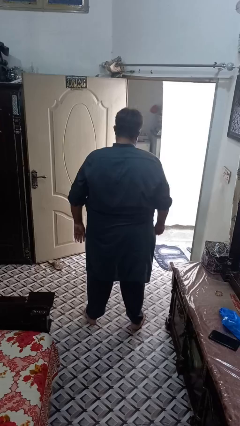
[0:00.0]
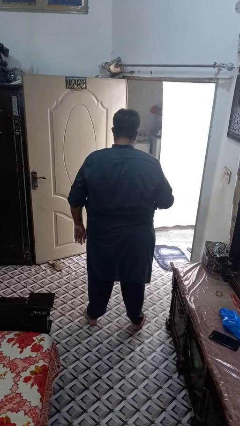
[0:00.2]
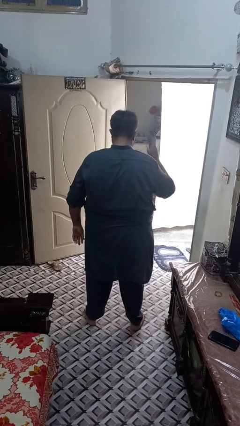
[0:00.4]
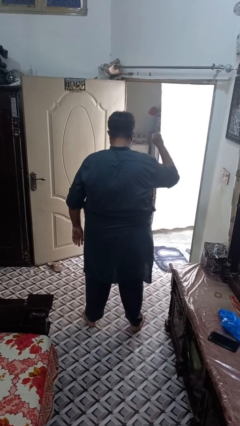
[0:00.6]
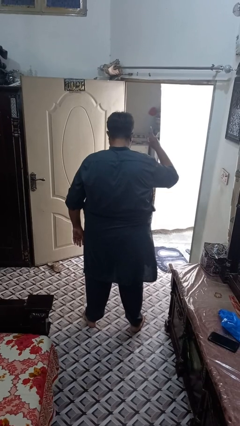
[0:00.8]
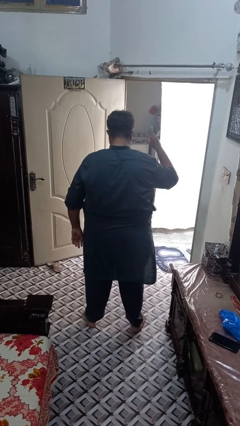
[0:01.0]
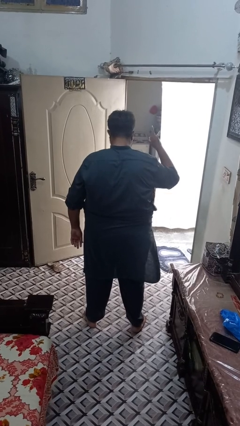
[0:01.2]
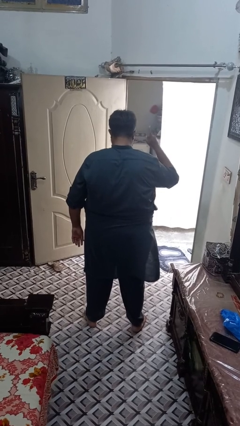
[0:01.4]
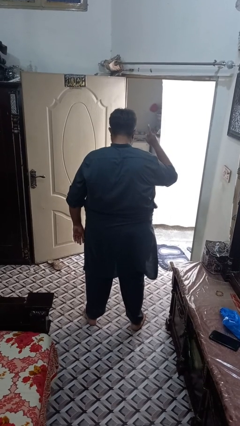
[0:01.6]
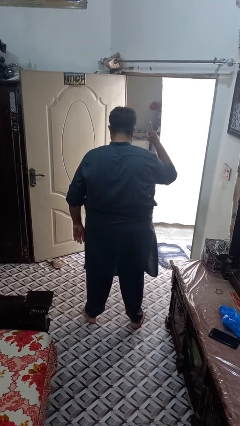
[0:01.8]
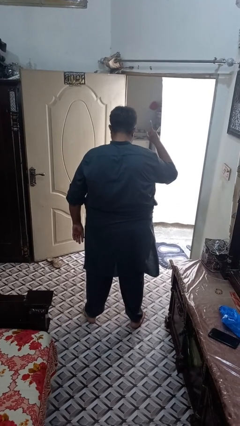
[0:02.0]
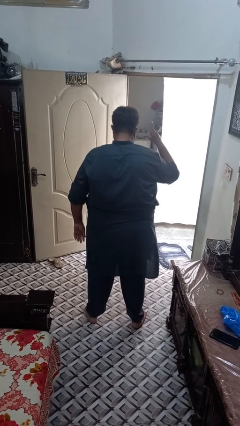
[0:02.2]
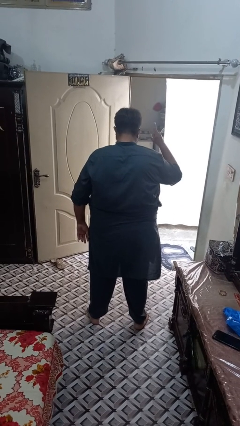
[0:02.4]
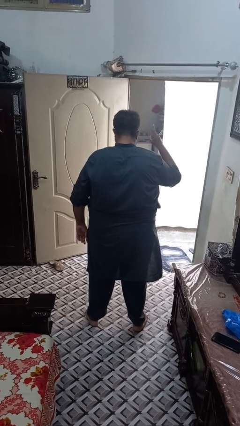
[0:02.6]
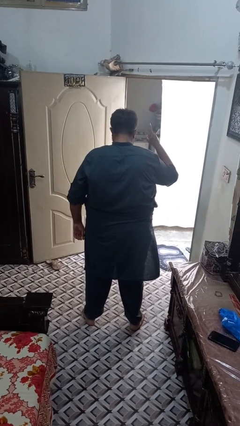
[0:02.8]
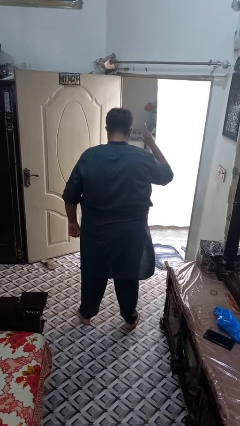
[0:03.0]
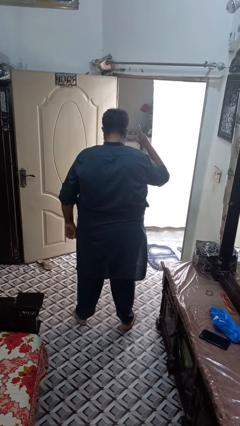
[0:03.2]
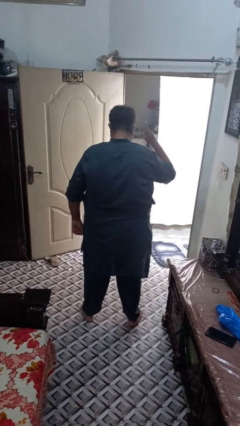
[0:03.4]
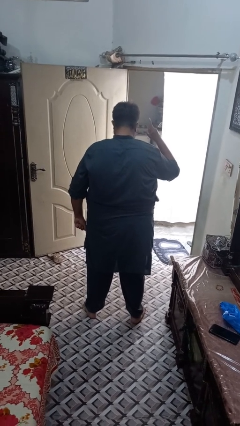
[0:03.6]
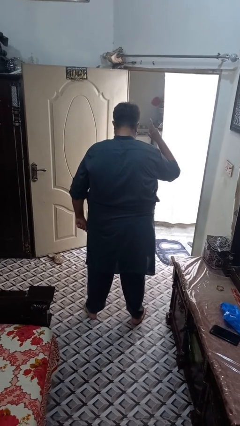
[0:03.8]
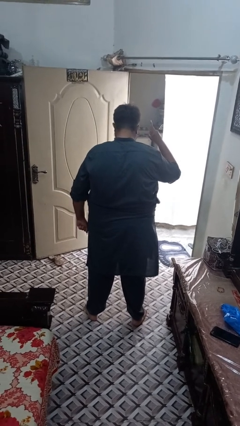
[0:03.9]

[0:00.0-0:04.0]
person gestures number one

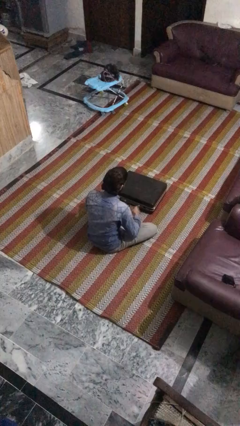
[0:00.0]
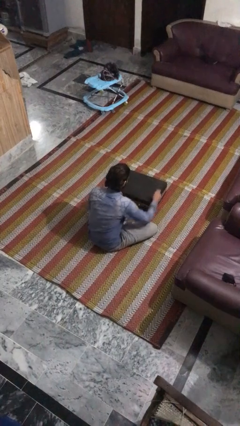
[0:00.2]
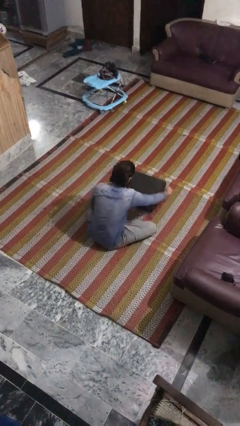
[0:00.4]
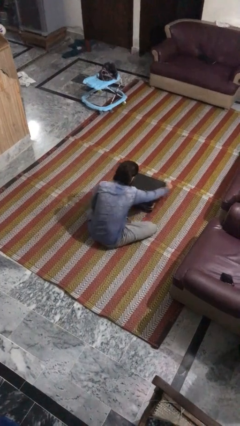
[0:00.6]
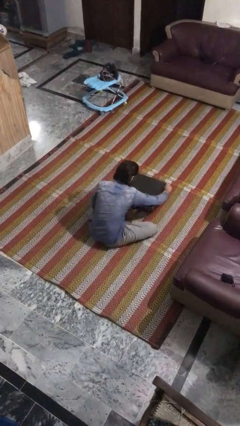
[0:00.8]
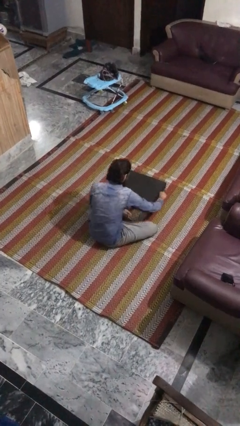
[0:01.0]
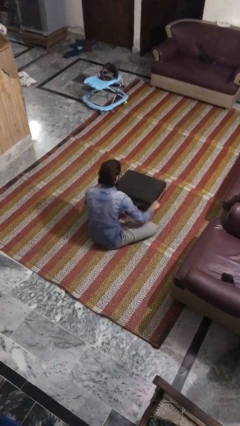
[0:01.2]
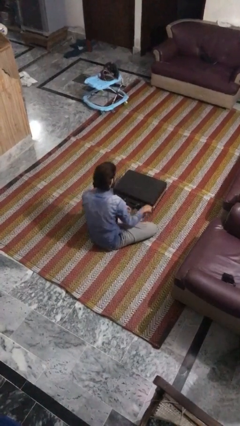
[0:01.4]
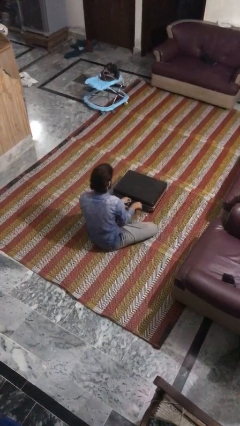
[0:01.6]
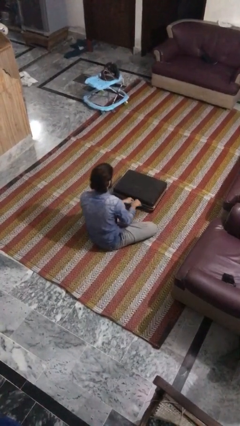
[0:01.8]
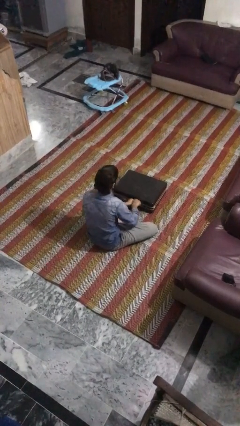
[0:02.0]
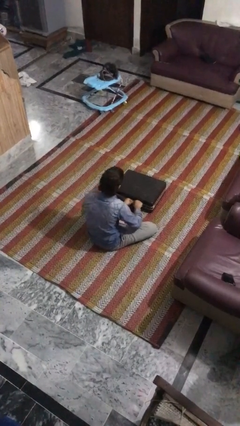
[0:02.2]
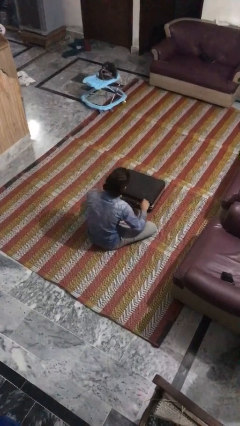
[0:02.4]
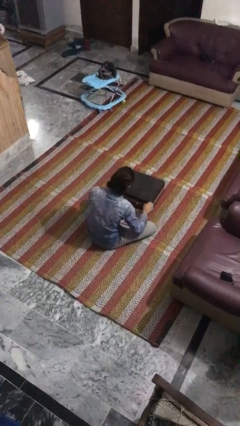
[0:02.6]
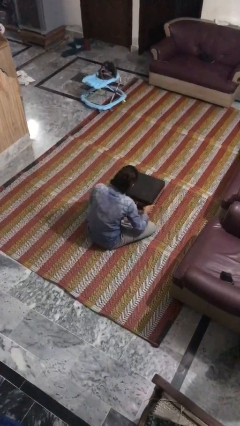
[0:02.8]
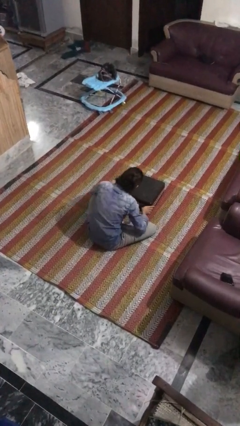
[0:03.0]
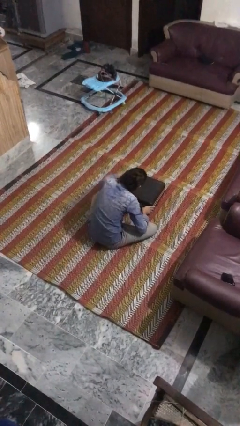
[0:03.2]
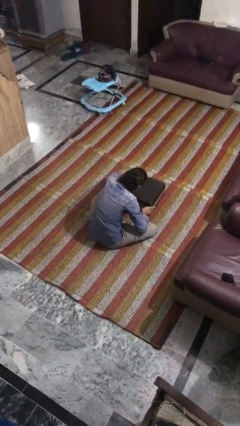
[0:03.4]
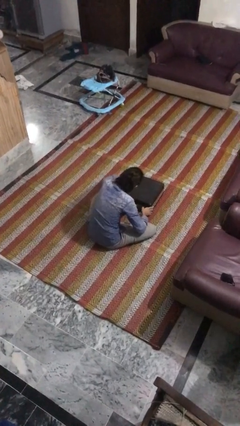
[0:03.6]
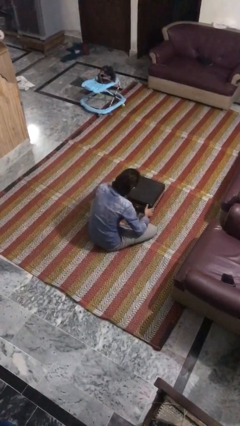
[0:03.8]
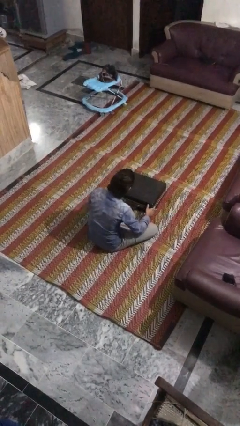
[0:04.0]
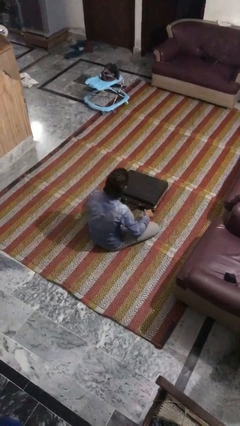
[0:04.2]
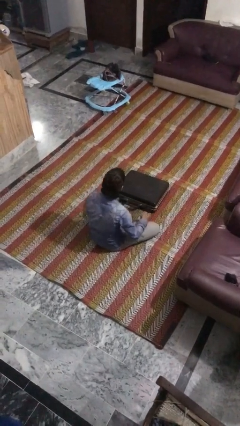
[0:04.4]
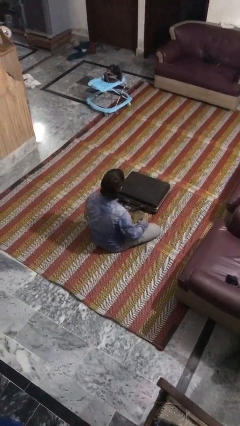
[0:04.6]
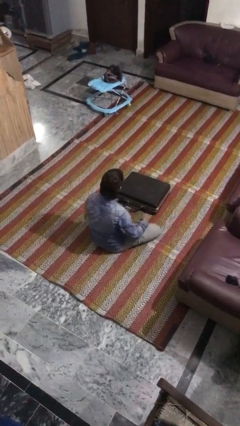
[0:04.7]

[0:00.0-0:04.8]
person opens suitcase

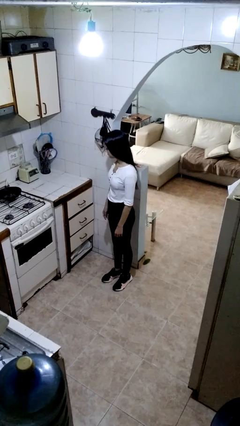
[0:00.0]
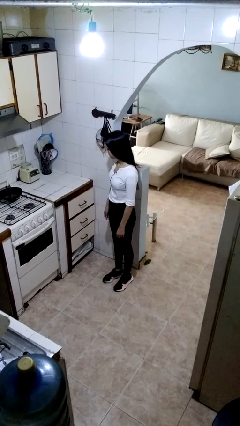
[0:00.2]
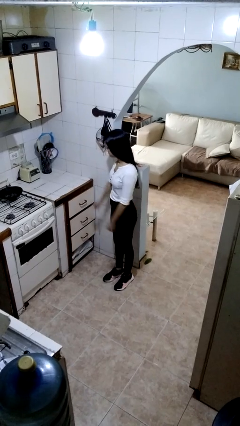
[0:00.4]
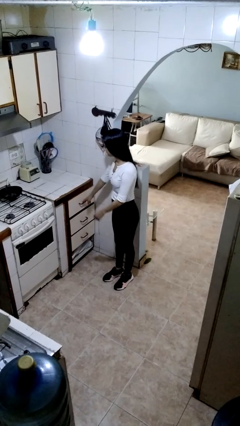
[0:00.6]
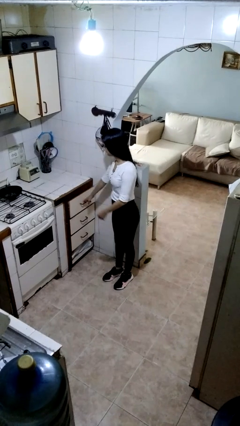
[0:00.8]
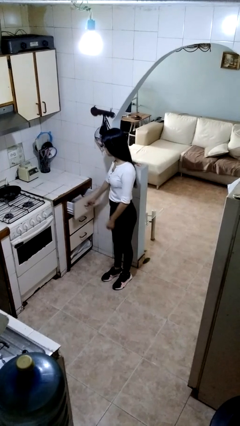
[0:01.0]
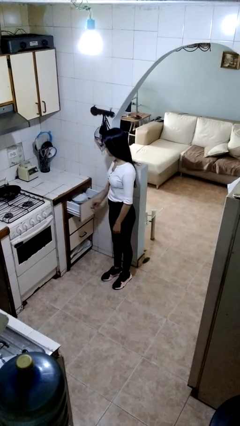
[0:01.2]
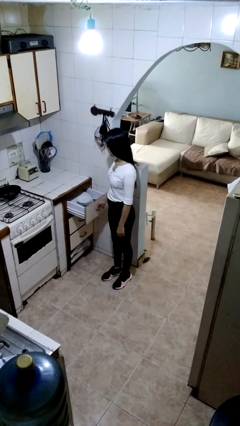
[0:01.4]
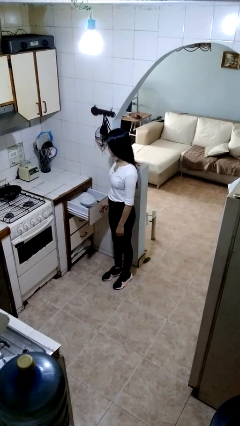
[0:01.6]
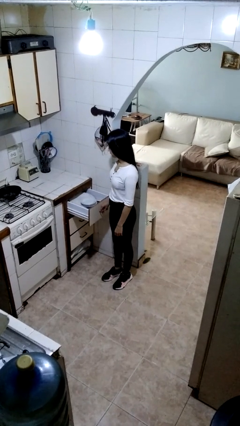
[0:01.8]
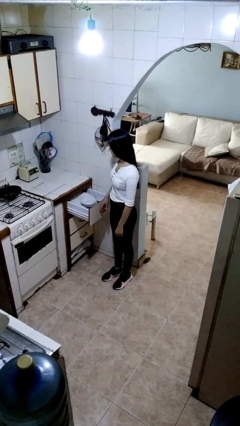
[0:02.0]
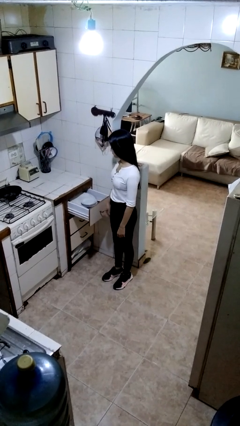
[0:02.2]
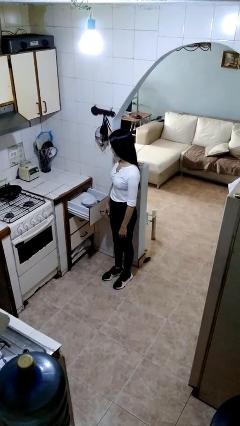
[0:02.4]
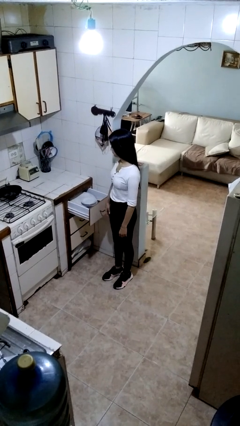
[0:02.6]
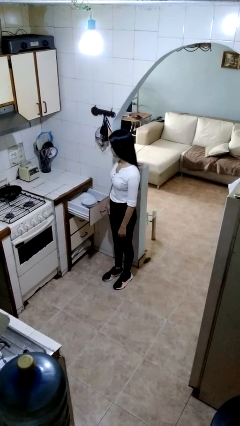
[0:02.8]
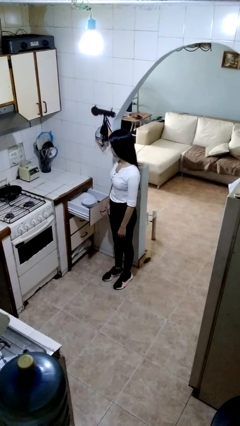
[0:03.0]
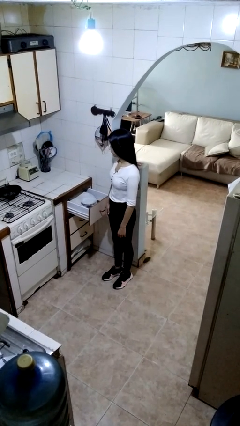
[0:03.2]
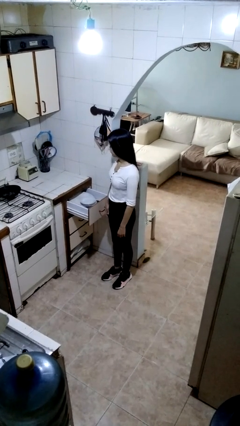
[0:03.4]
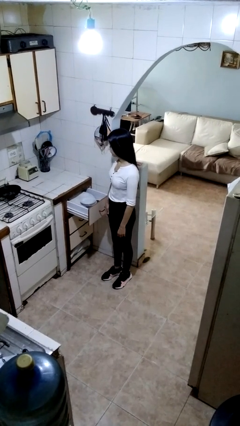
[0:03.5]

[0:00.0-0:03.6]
person opens kitchen drawer

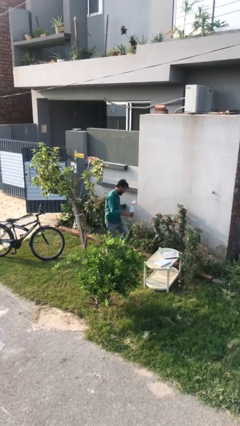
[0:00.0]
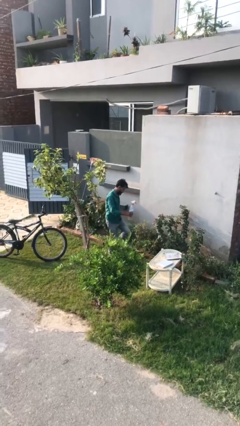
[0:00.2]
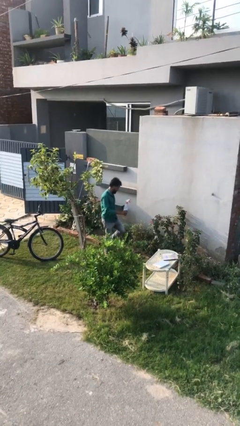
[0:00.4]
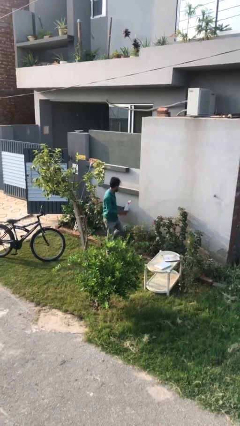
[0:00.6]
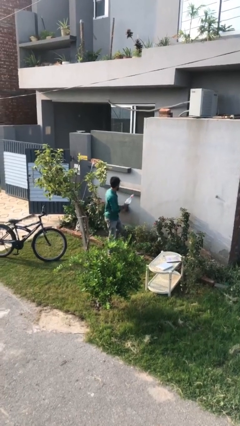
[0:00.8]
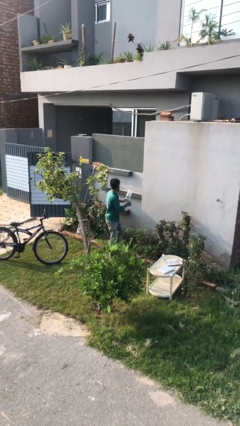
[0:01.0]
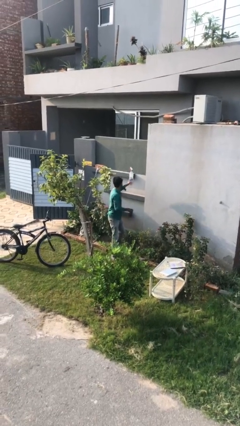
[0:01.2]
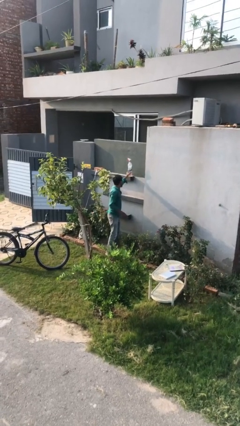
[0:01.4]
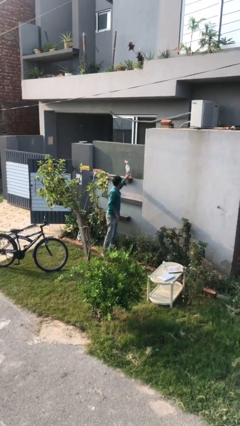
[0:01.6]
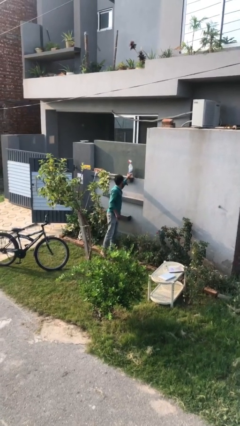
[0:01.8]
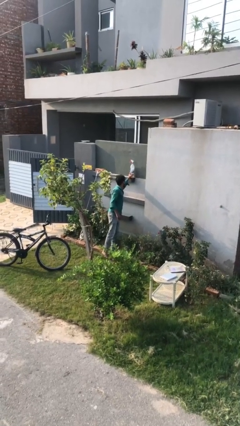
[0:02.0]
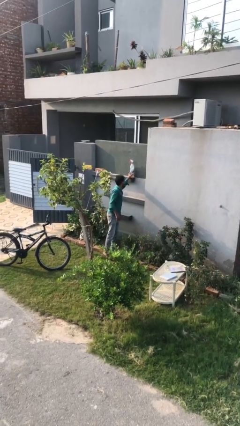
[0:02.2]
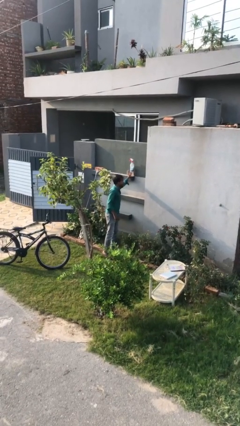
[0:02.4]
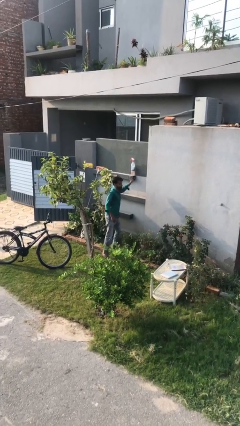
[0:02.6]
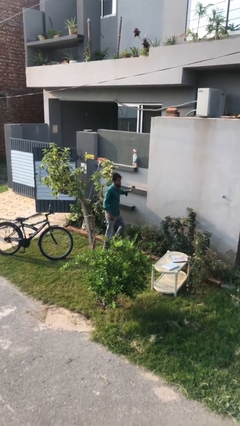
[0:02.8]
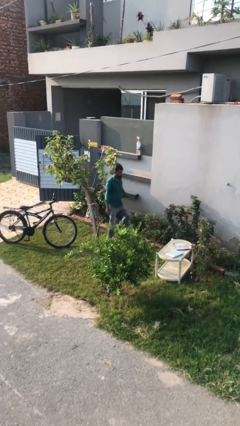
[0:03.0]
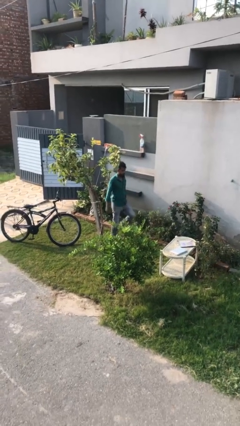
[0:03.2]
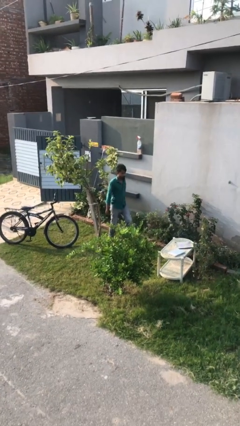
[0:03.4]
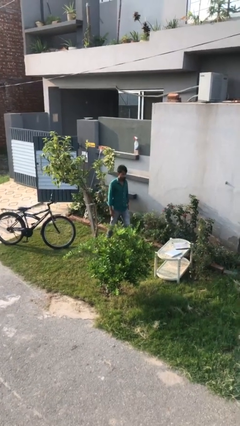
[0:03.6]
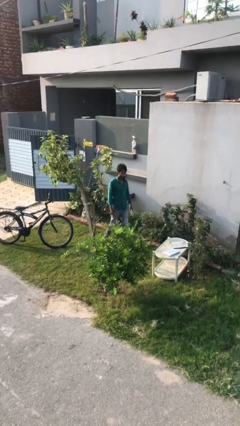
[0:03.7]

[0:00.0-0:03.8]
person puts down object on shelf

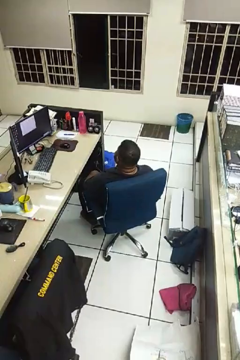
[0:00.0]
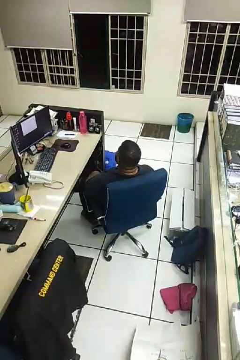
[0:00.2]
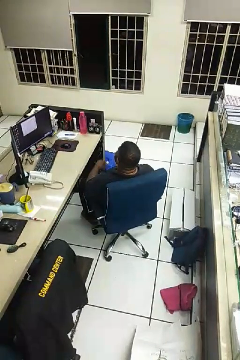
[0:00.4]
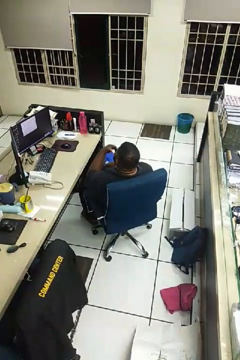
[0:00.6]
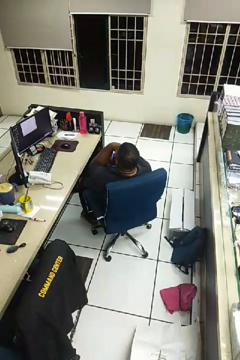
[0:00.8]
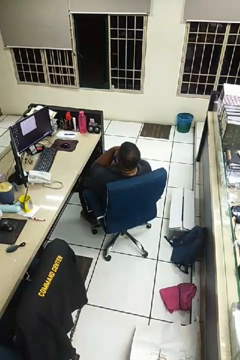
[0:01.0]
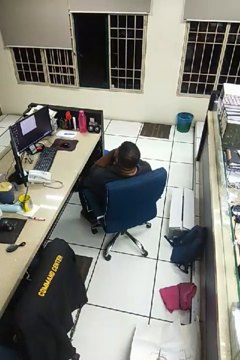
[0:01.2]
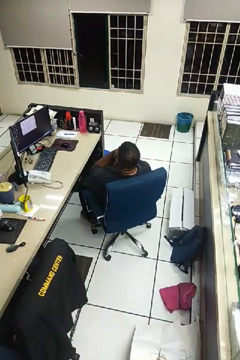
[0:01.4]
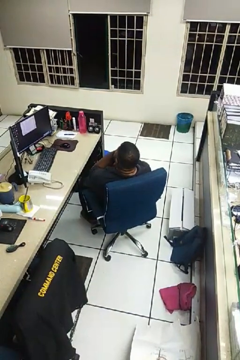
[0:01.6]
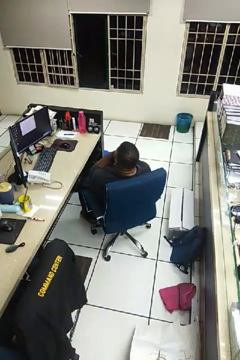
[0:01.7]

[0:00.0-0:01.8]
person strokes chin
